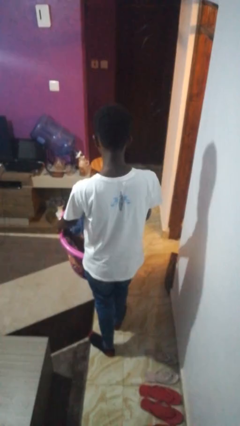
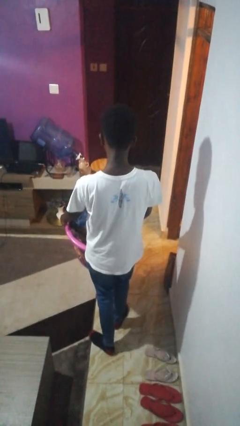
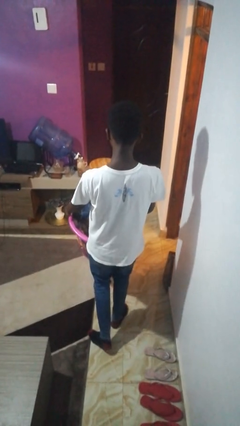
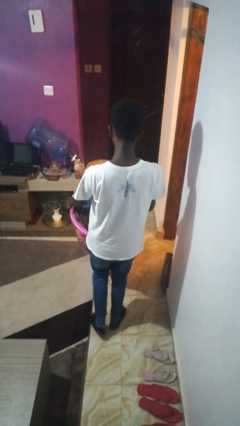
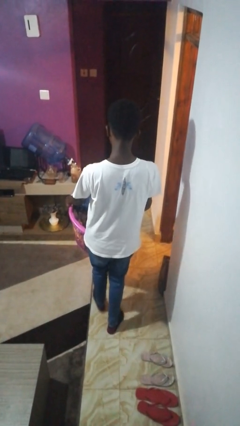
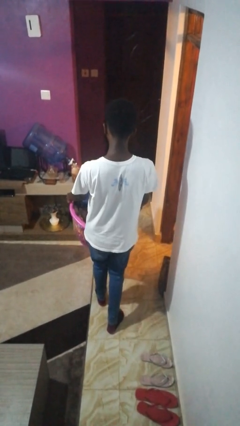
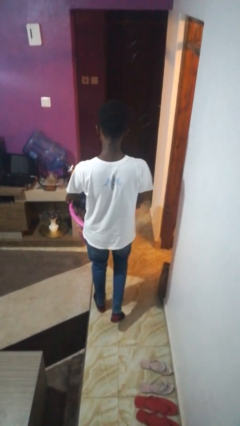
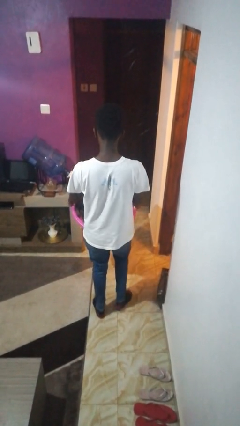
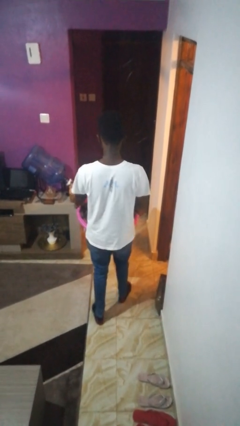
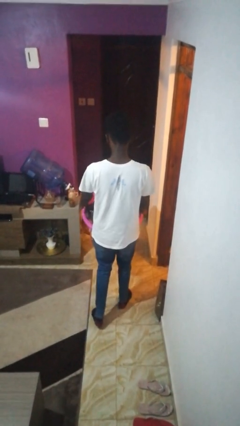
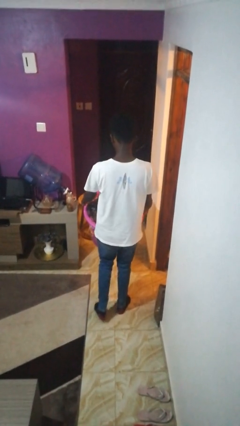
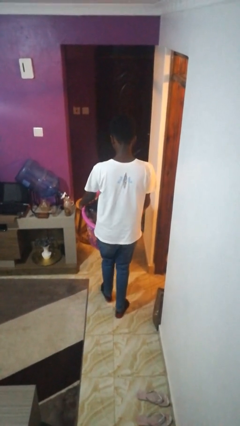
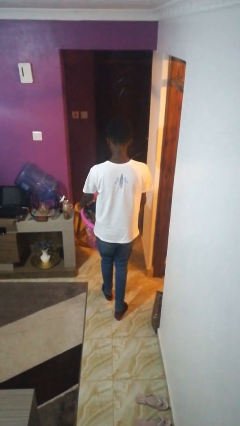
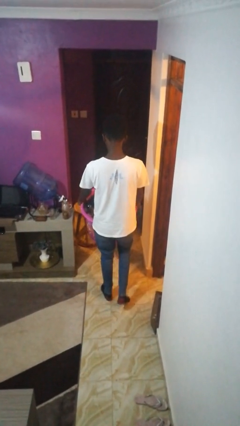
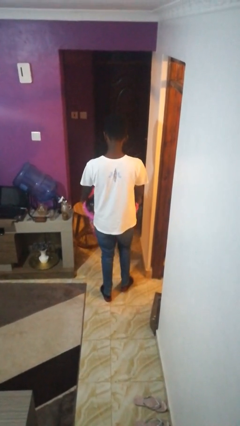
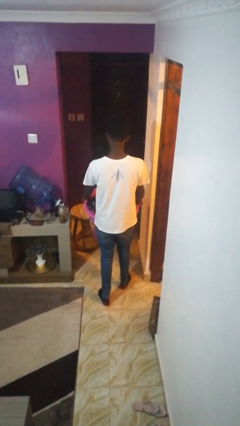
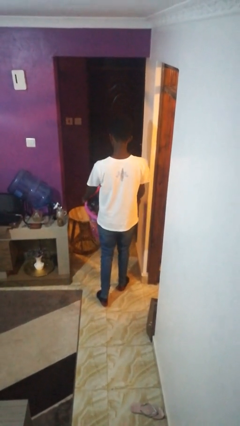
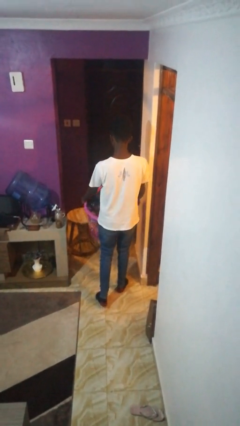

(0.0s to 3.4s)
person carries laundry basket

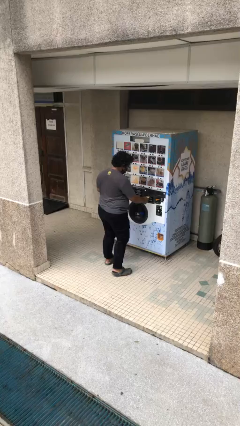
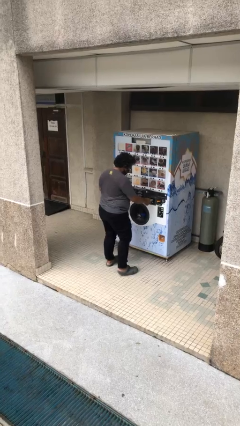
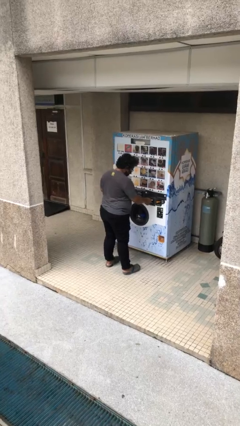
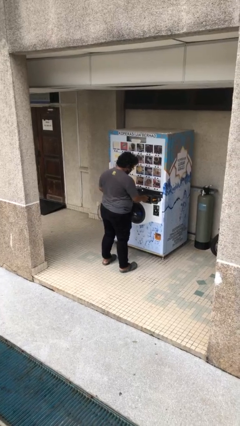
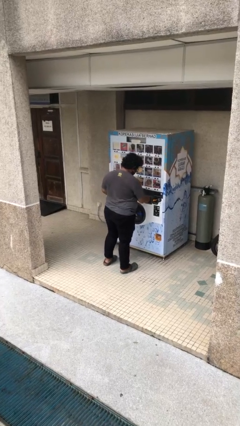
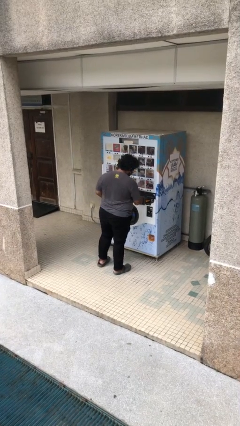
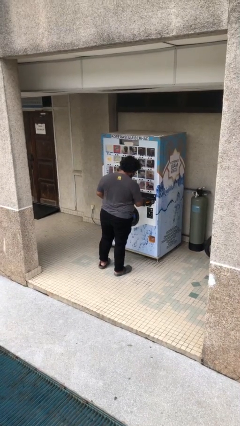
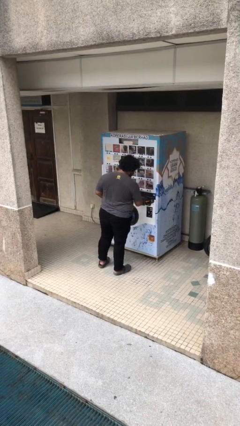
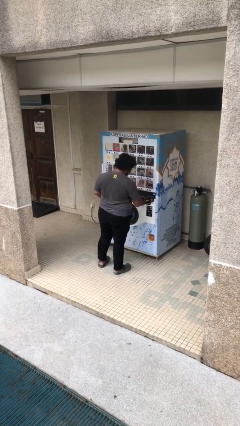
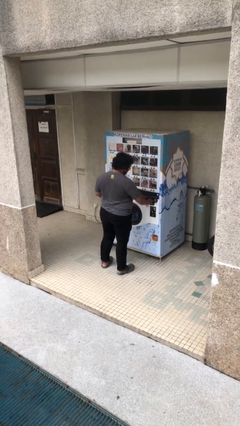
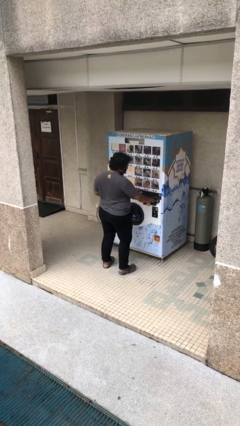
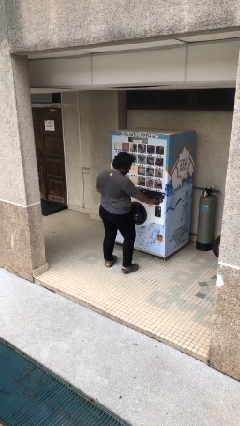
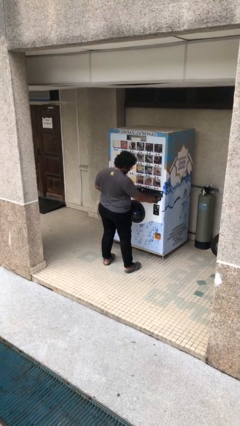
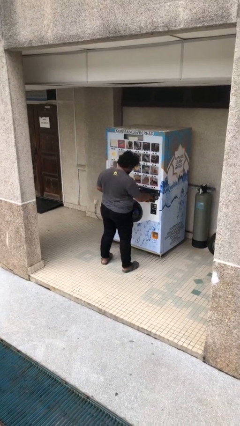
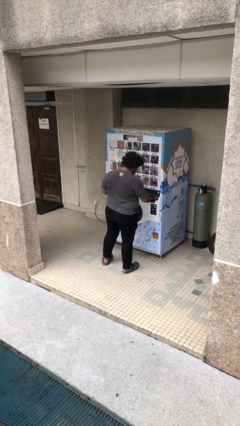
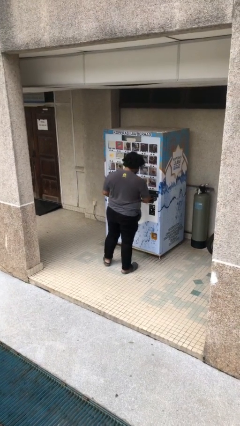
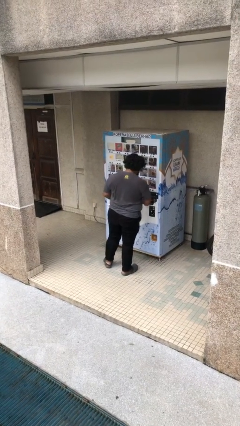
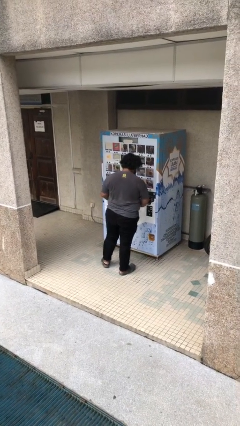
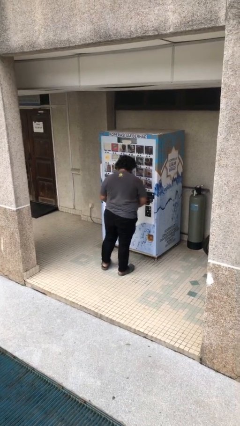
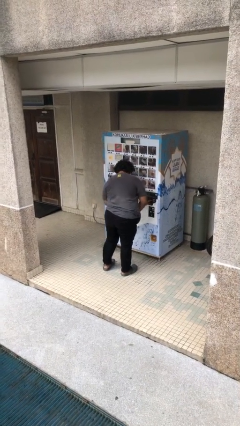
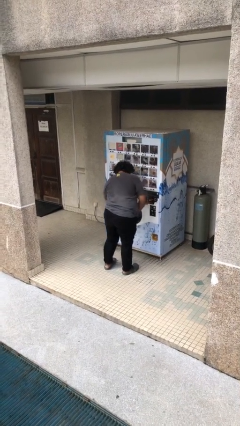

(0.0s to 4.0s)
person purchases from machine

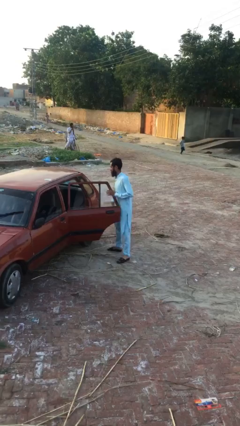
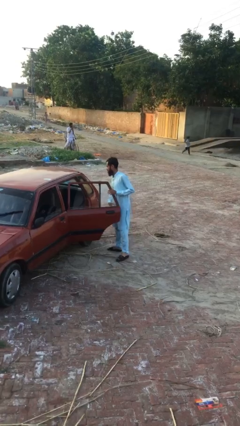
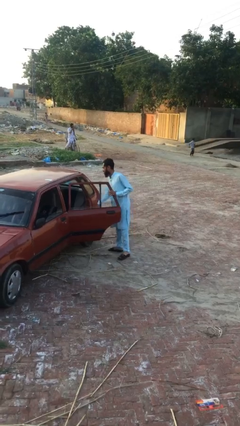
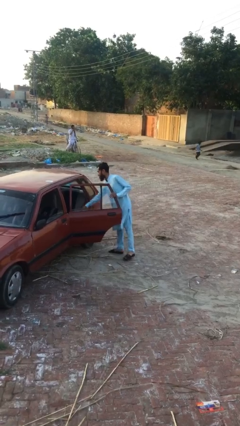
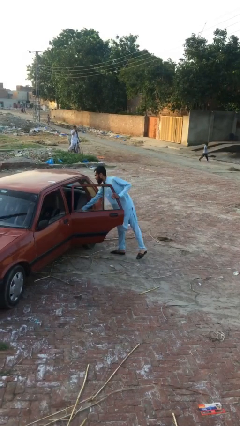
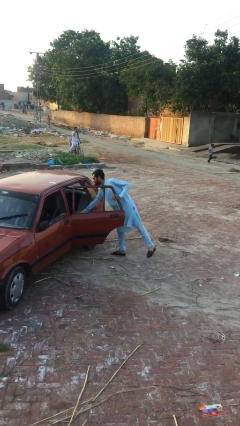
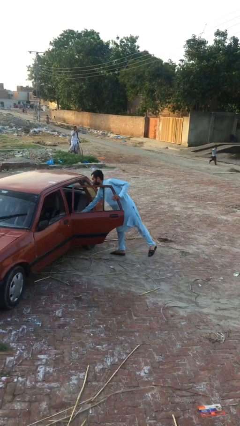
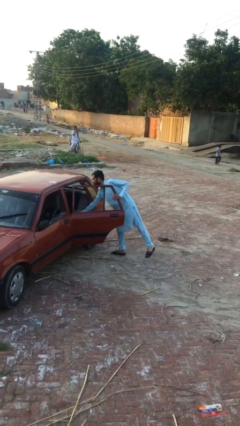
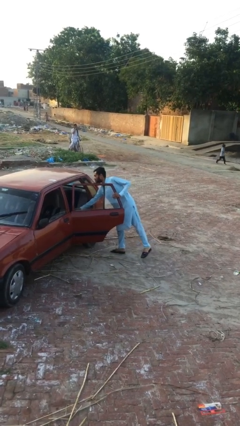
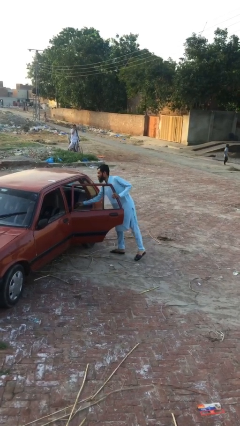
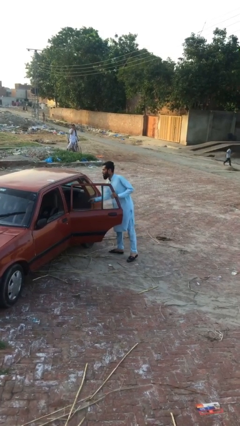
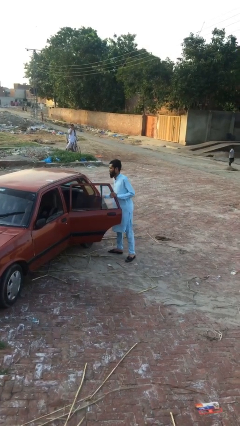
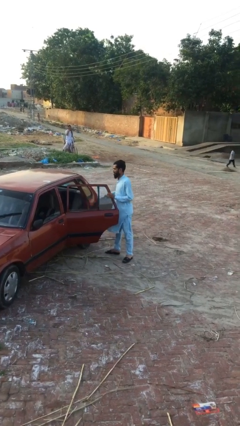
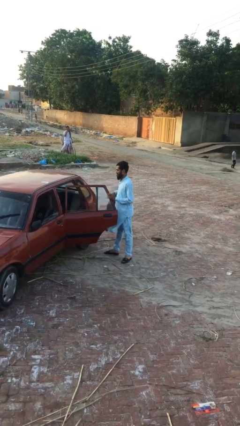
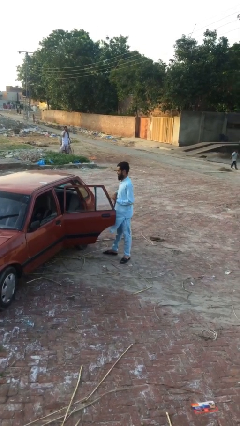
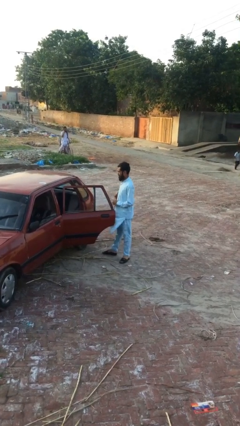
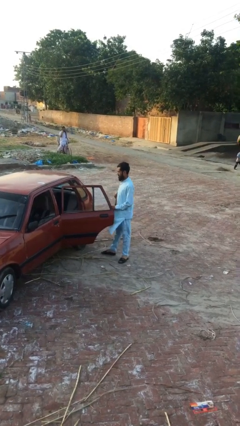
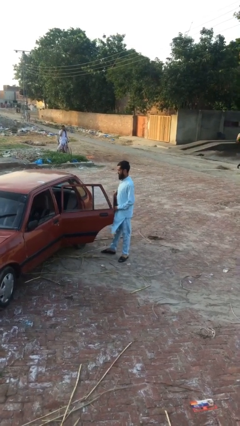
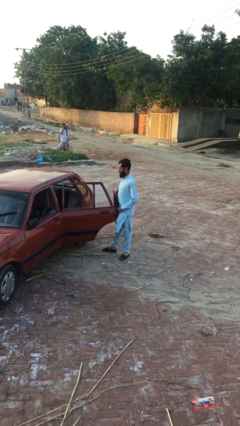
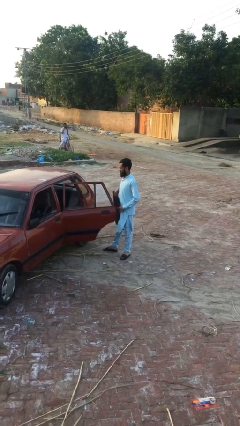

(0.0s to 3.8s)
person unloads car

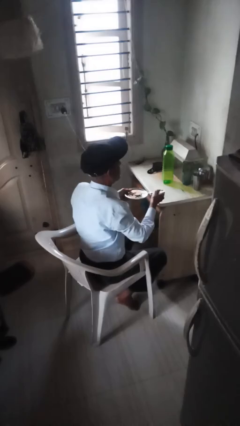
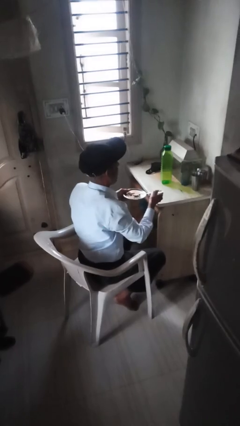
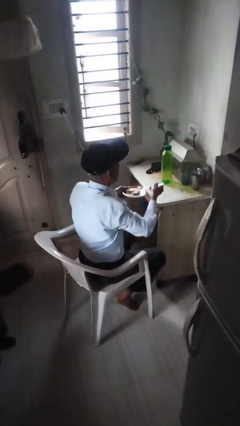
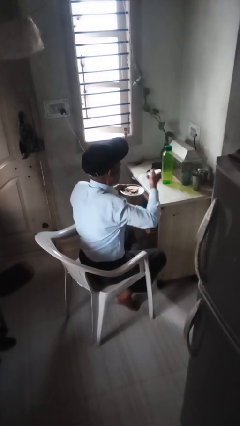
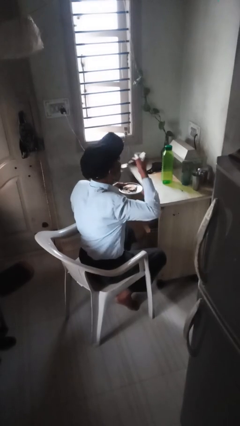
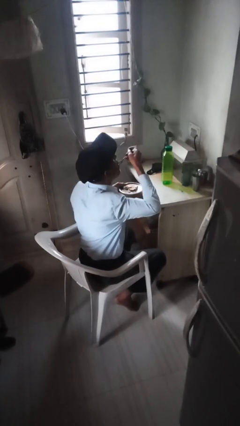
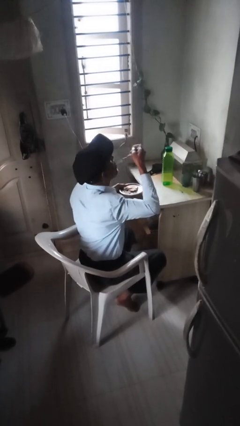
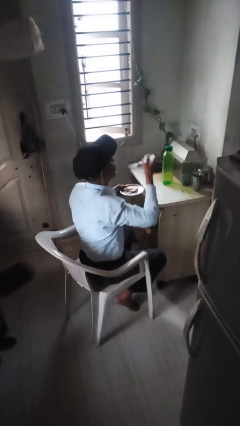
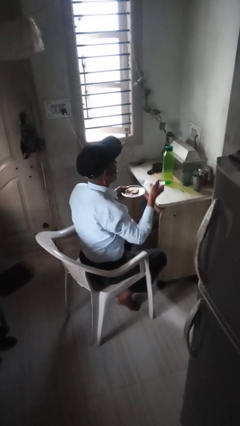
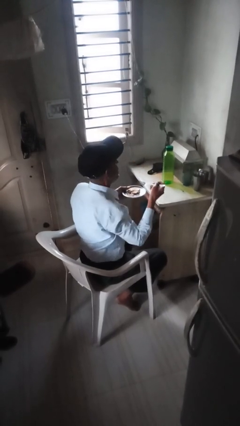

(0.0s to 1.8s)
person eats with utensil

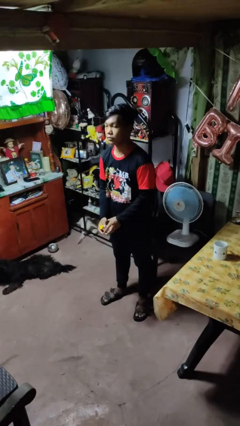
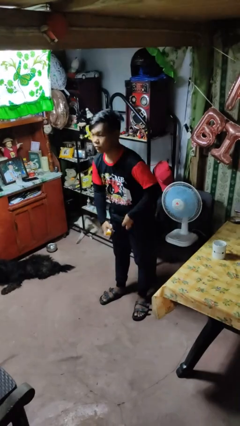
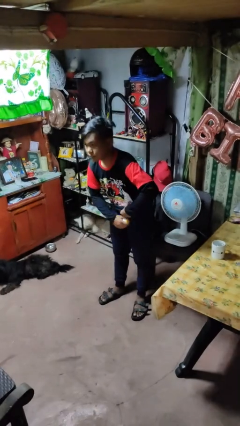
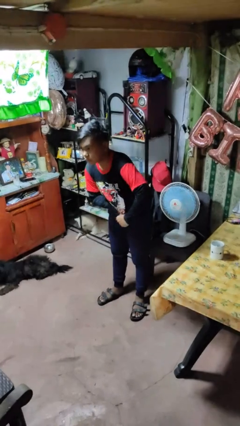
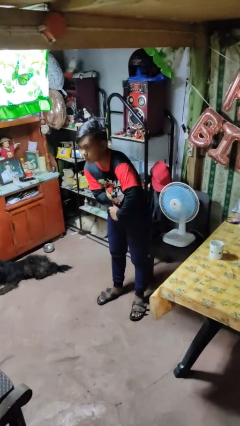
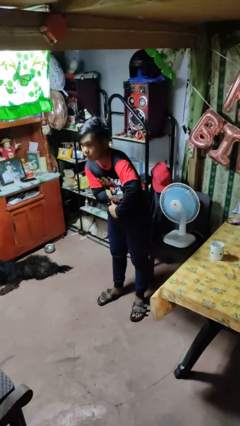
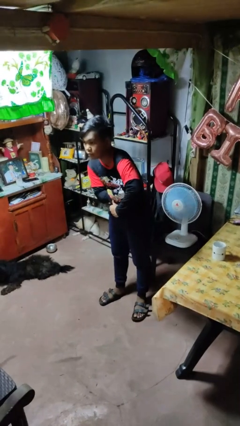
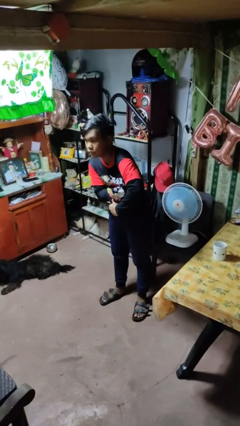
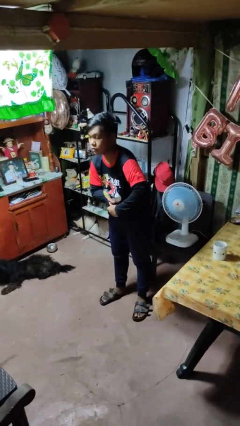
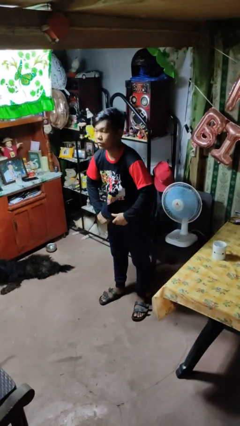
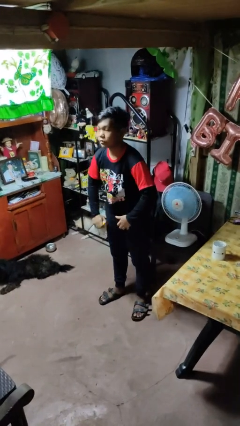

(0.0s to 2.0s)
person applies deodorant

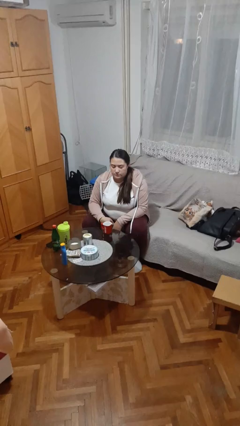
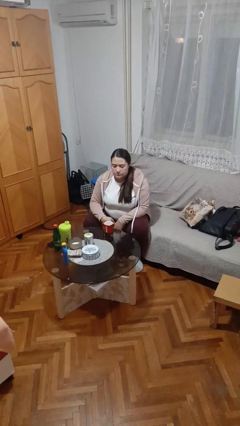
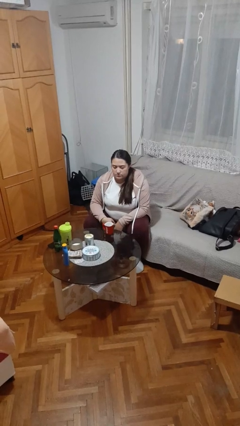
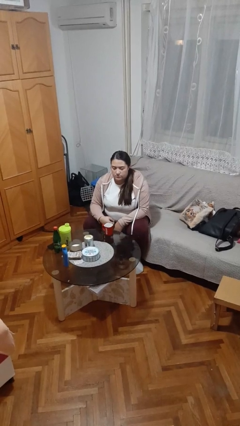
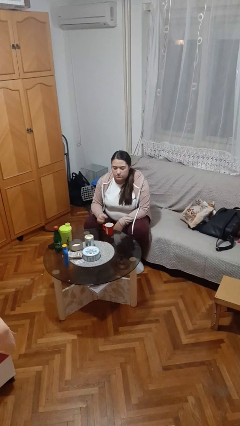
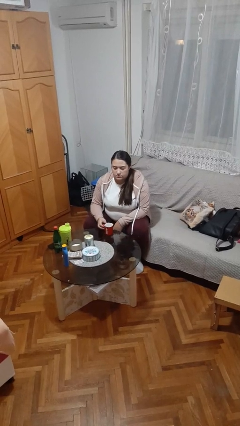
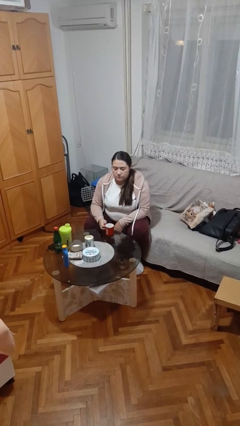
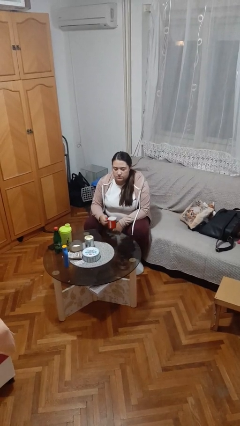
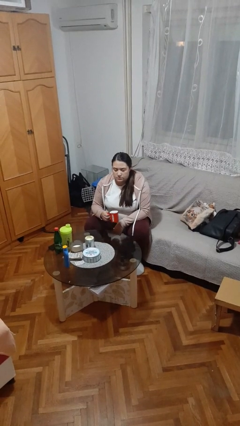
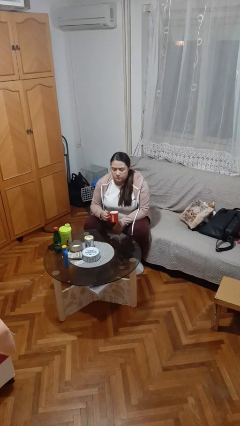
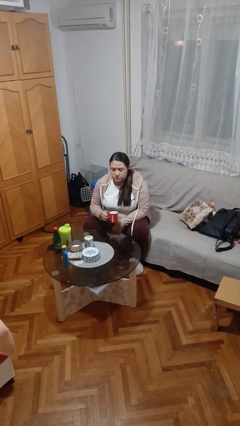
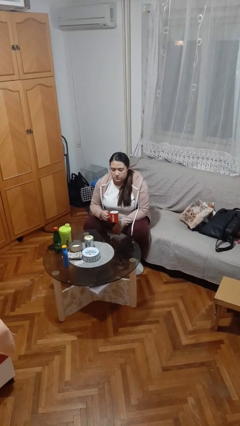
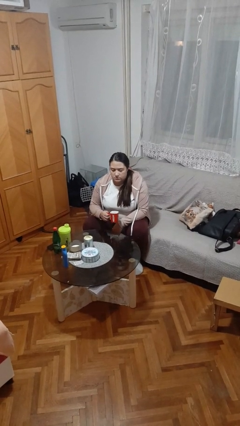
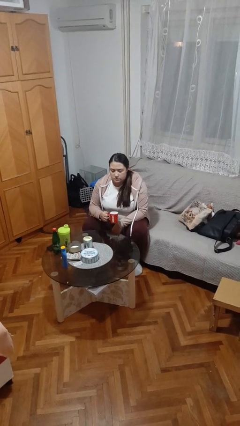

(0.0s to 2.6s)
person picks up object from table

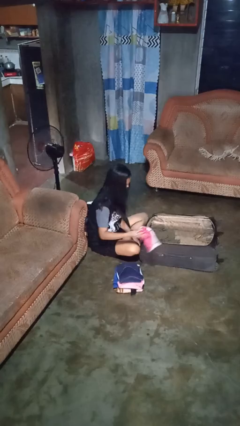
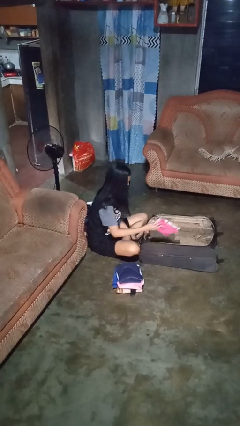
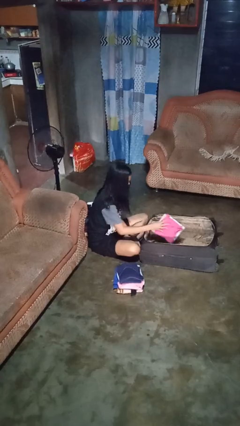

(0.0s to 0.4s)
person loads clothes into suitcase
